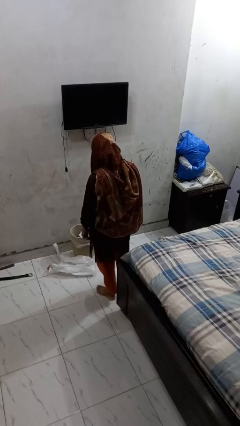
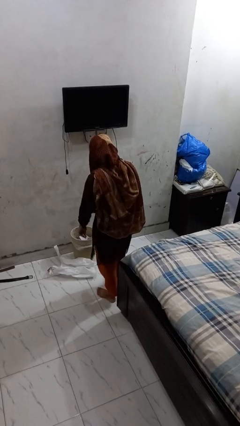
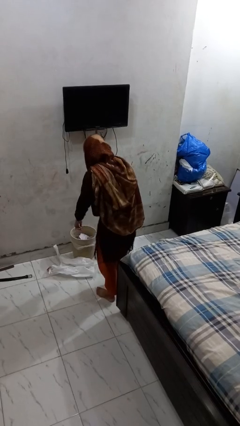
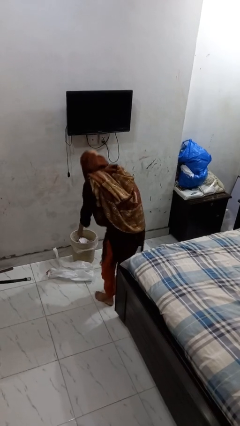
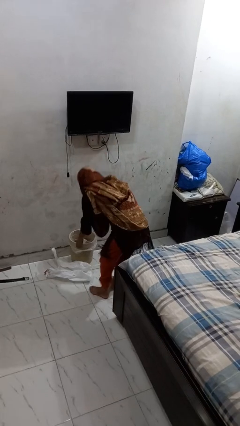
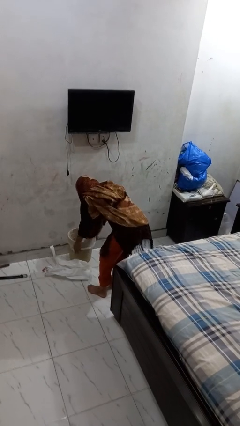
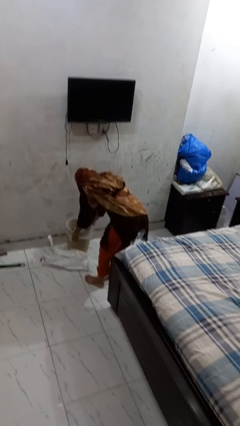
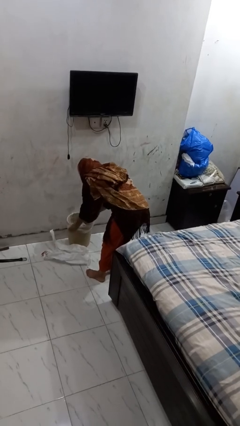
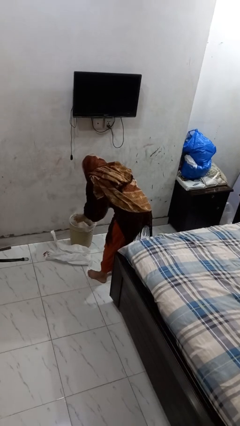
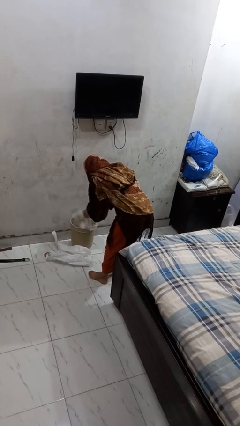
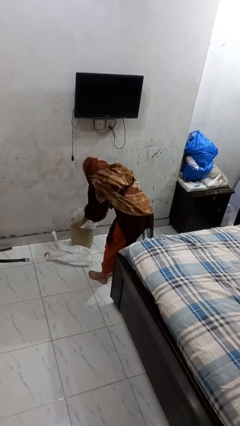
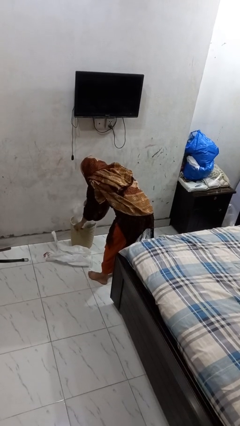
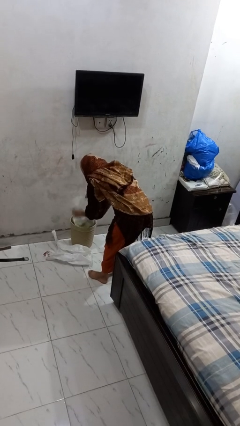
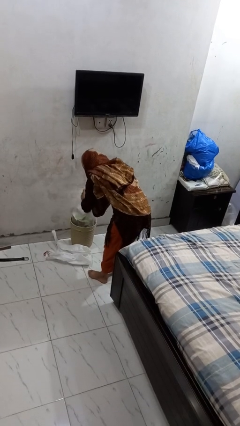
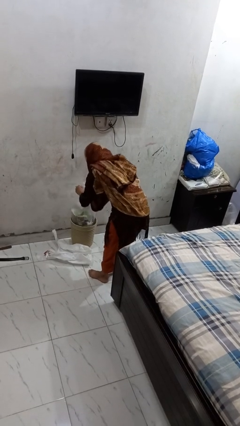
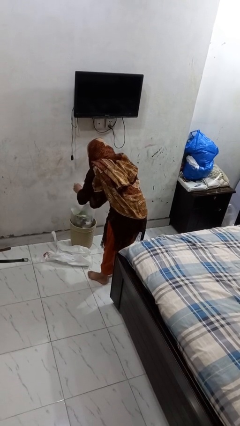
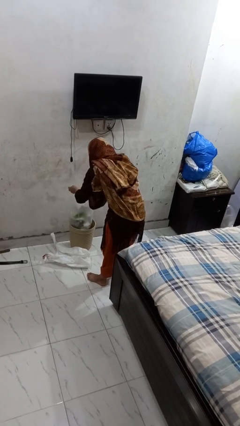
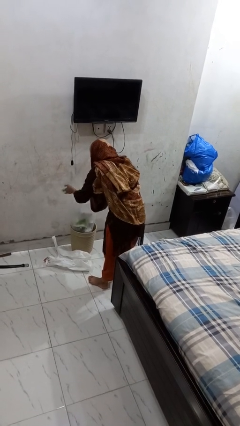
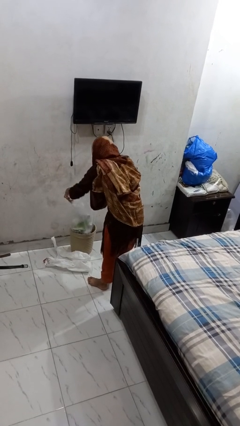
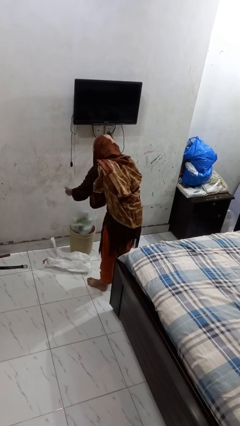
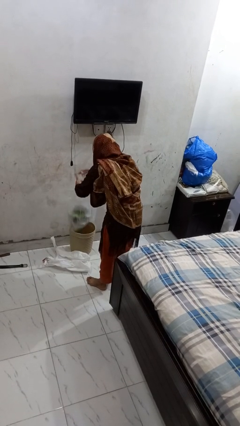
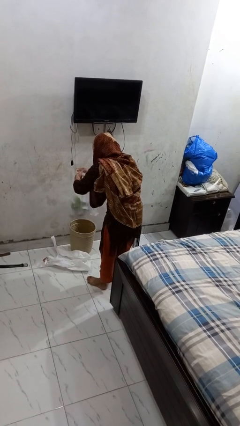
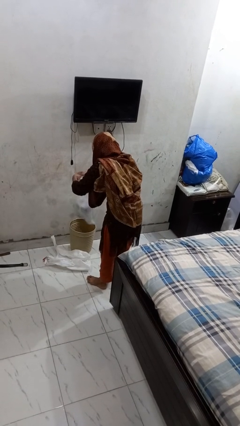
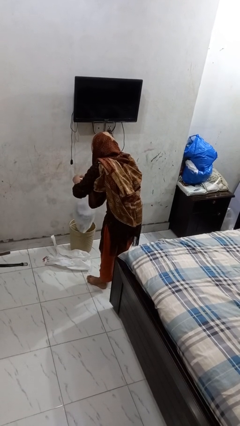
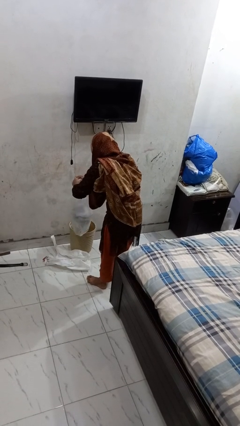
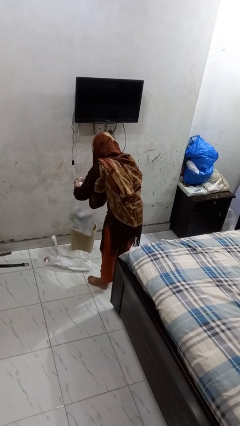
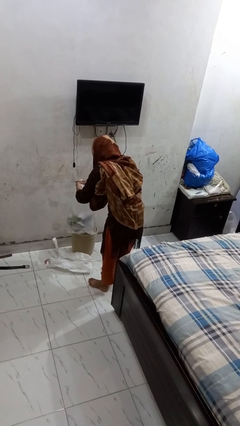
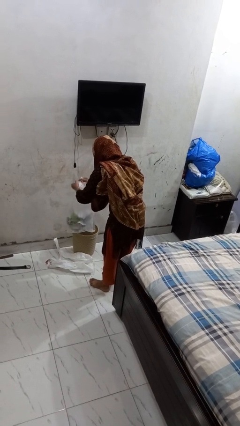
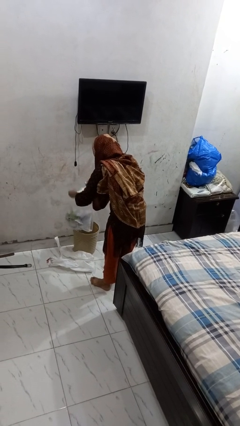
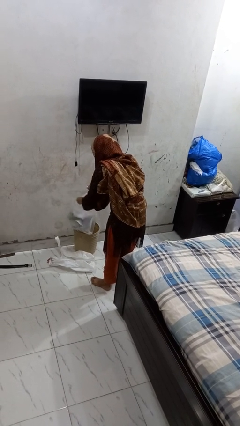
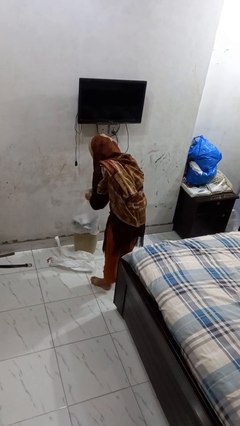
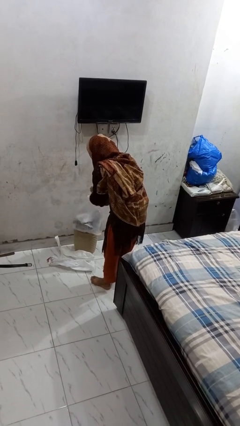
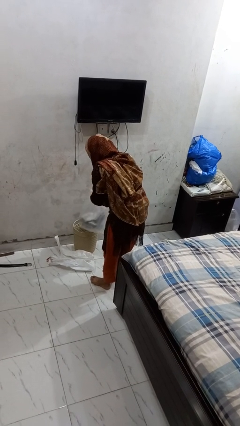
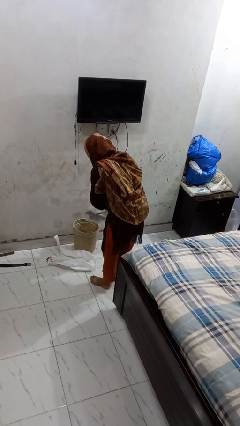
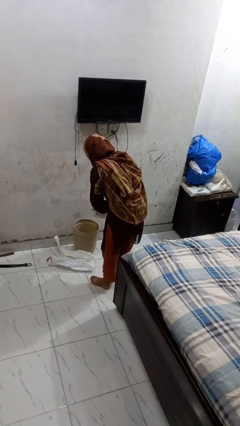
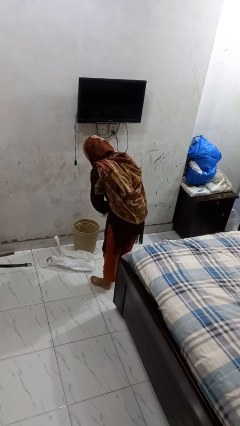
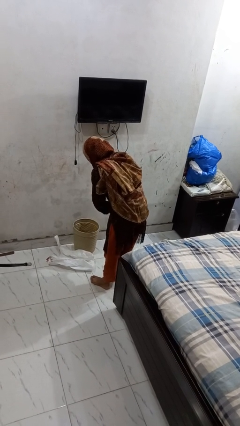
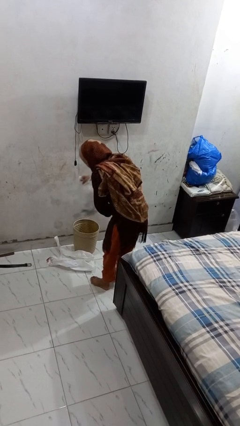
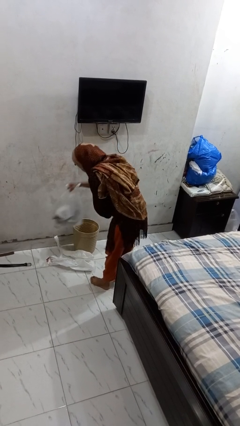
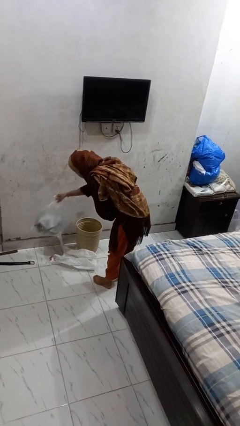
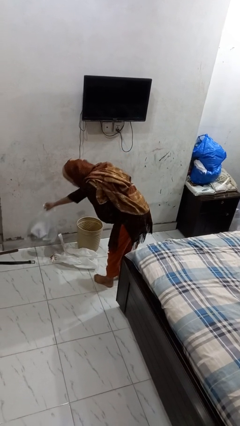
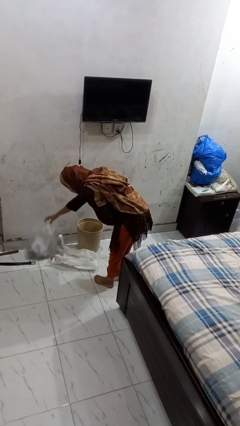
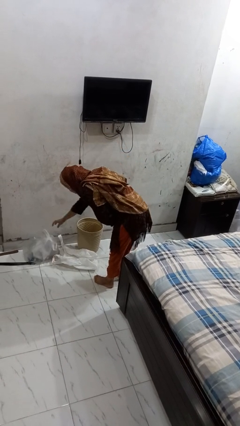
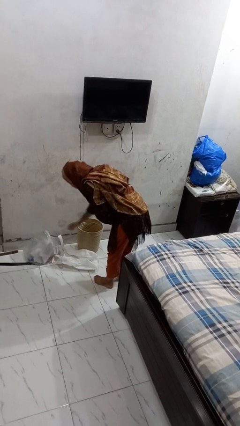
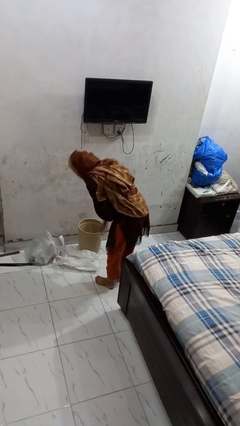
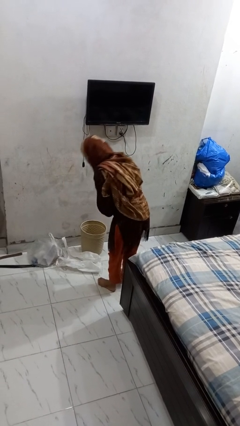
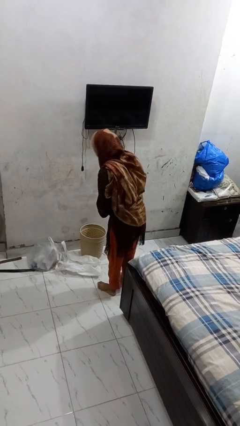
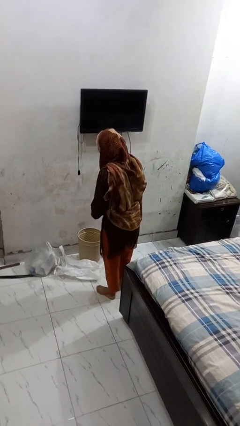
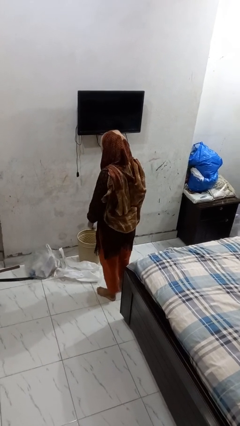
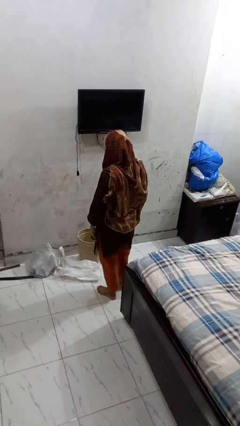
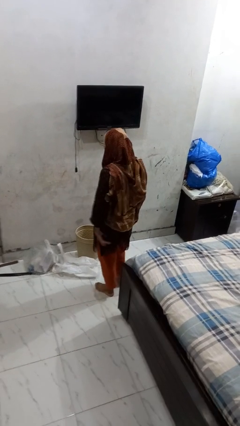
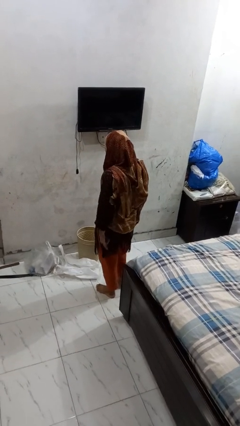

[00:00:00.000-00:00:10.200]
person removes trashbag from trashcan

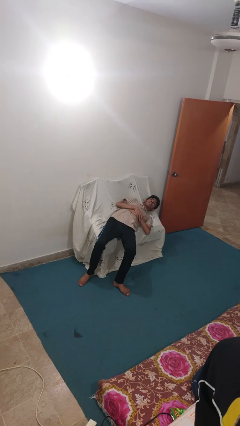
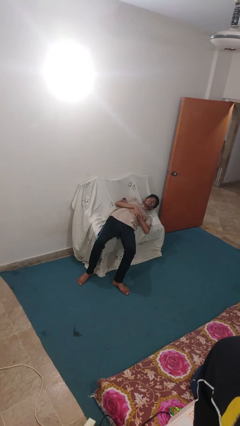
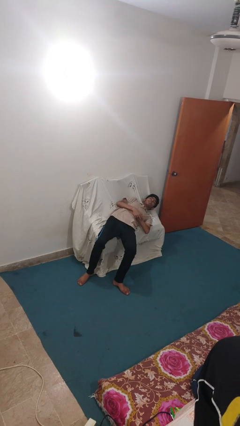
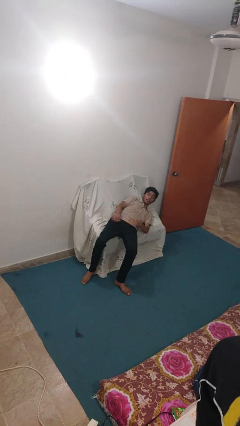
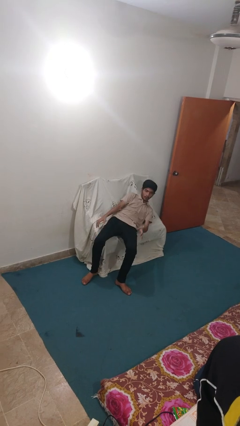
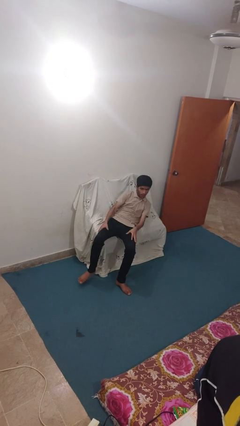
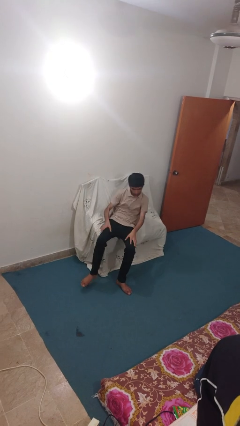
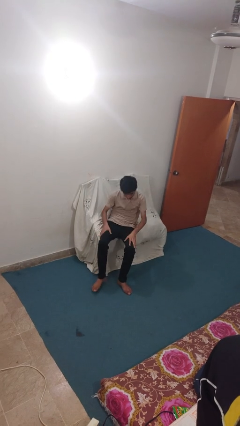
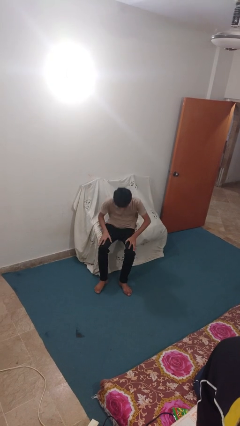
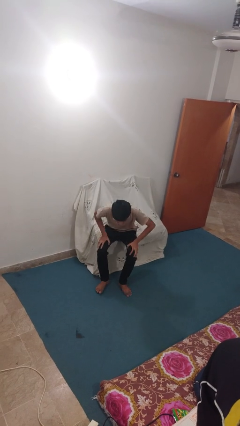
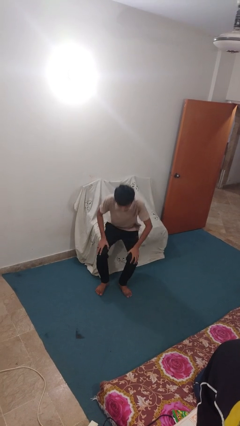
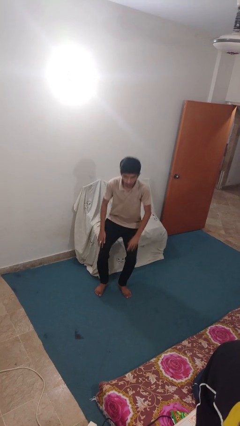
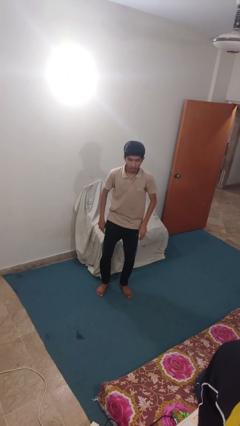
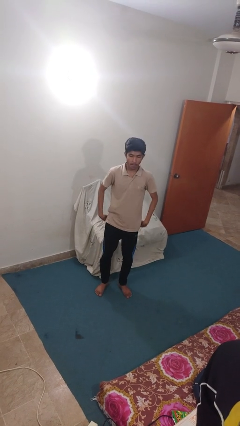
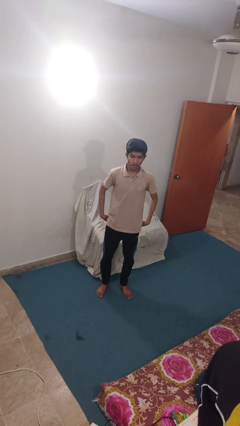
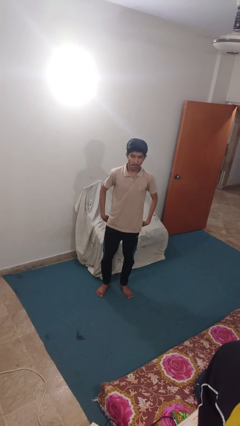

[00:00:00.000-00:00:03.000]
person stands up

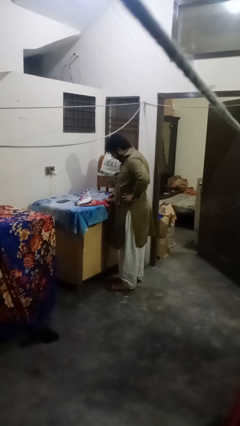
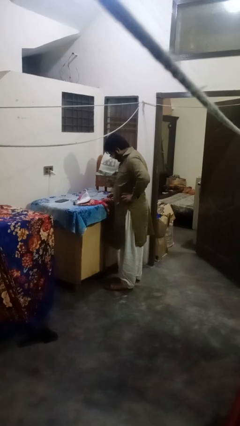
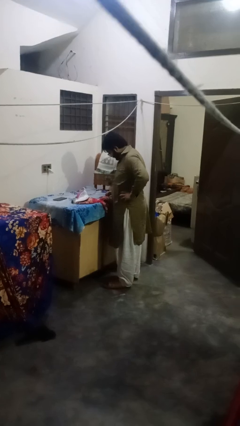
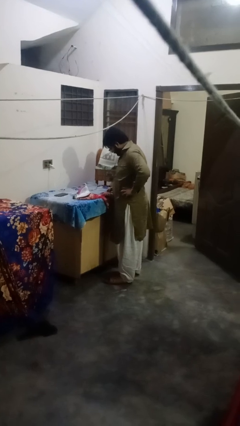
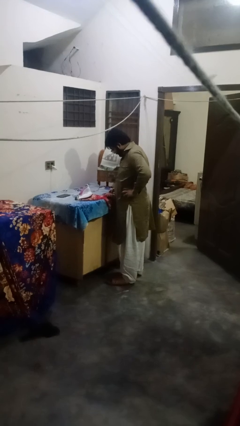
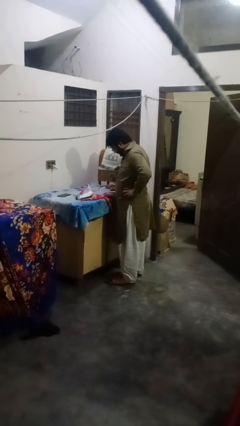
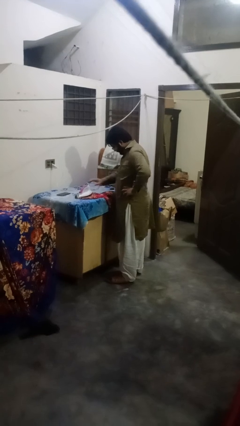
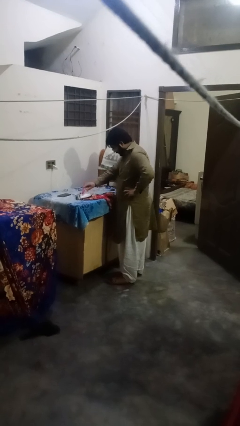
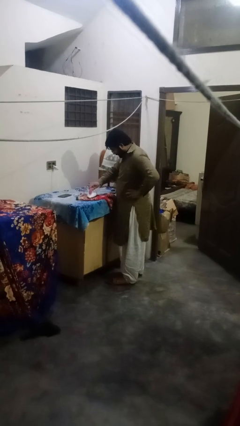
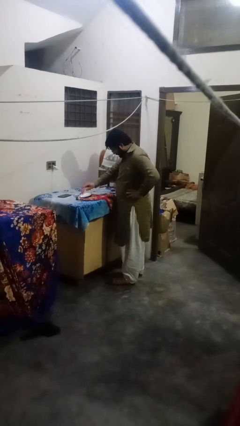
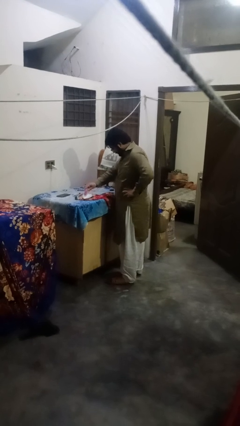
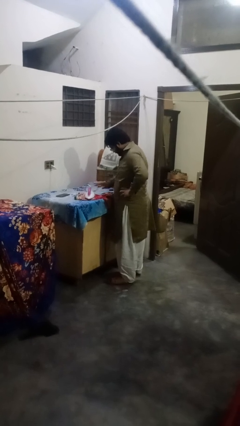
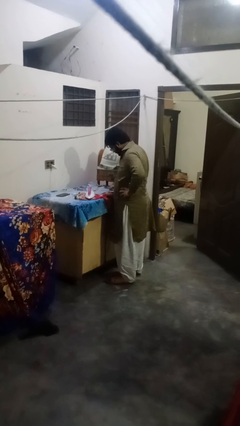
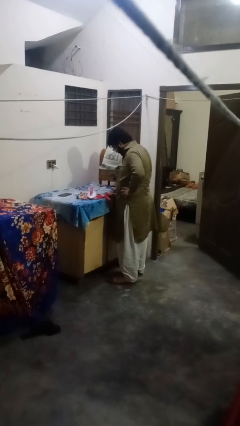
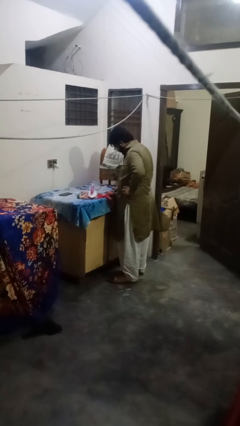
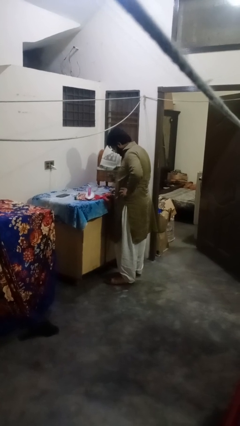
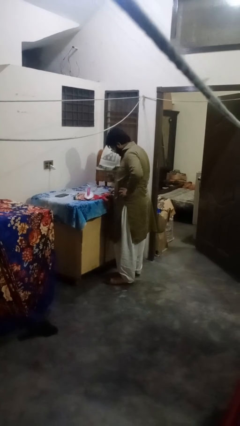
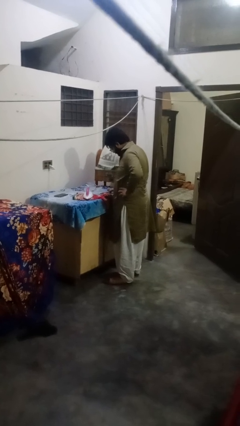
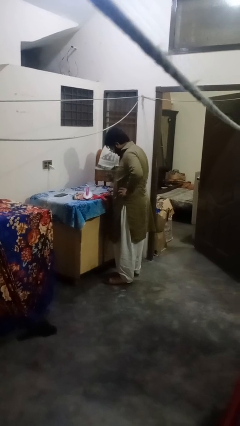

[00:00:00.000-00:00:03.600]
person irons clothes

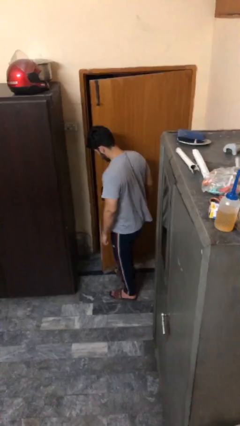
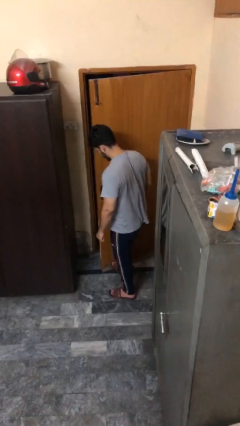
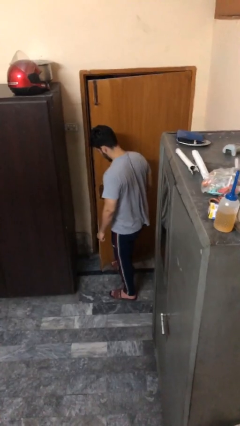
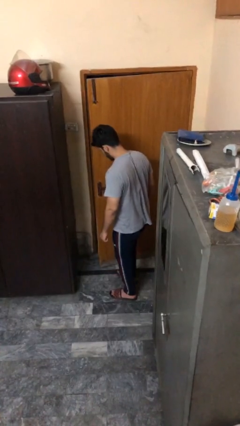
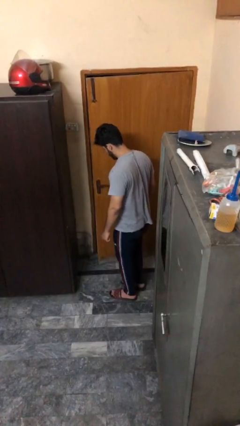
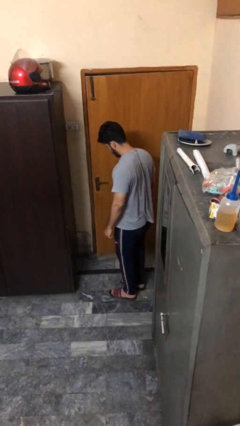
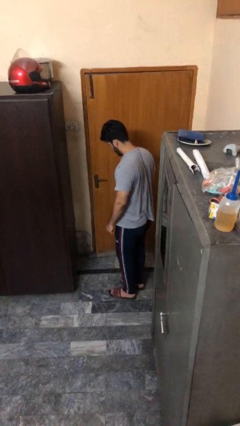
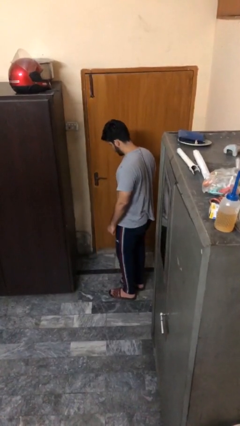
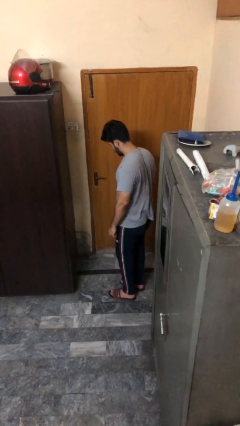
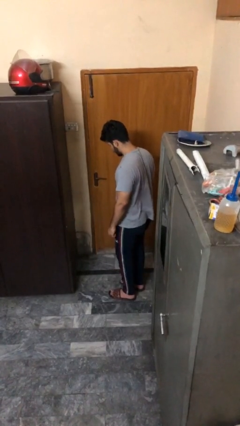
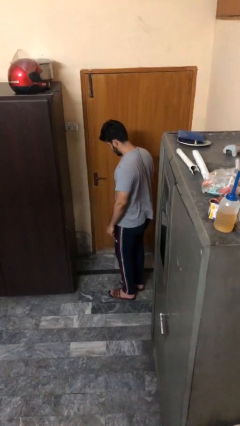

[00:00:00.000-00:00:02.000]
person closes door with foot
